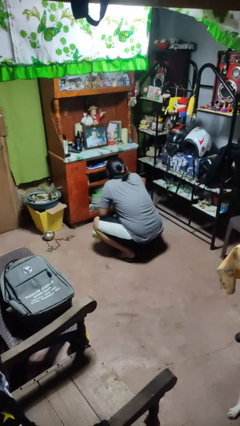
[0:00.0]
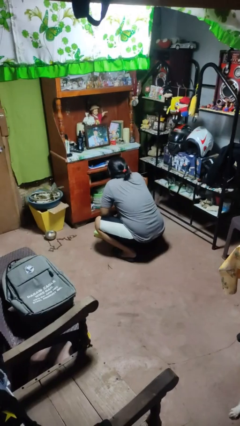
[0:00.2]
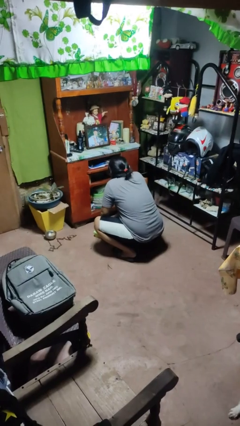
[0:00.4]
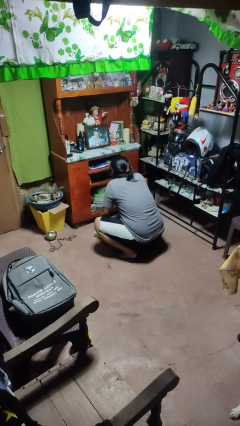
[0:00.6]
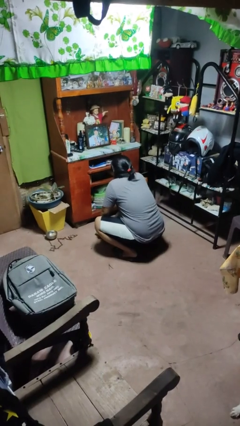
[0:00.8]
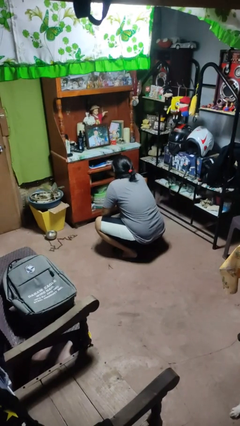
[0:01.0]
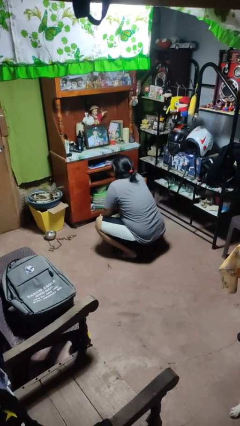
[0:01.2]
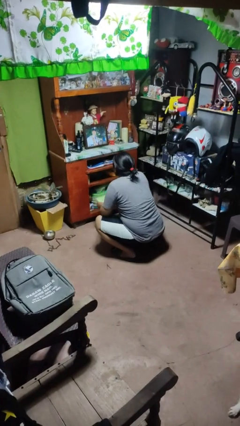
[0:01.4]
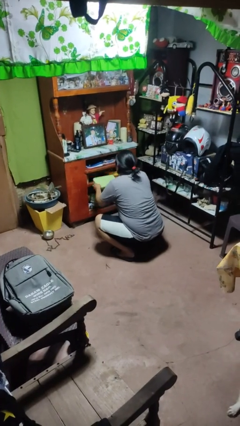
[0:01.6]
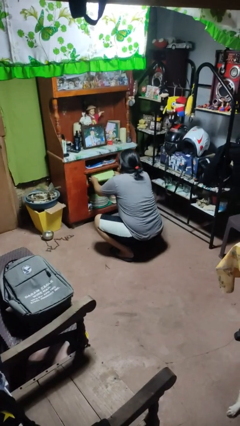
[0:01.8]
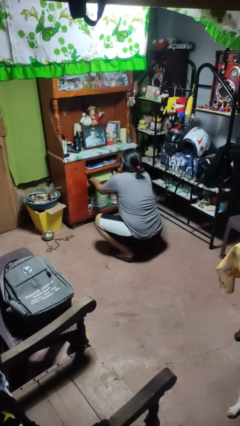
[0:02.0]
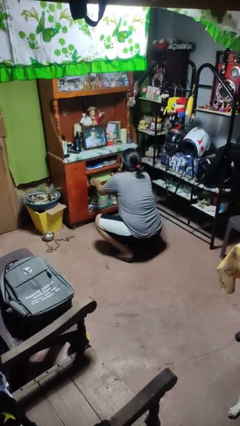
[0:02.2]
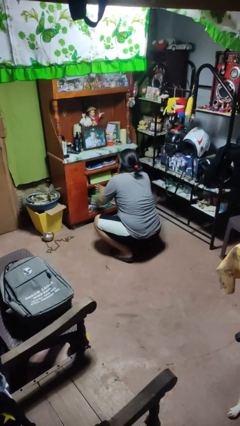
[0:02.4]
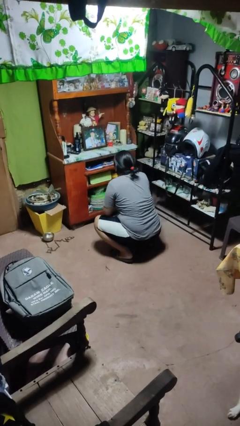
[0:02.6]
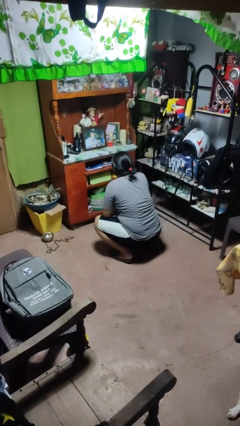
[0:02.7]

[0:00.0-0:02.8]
person puts object in cabinet

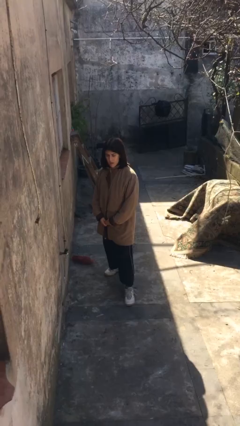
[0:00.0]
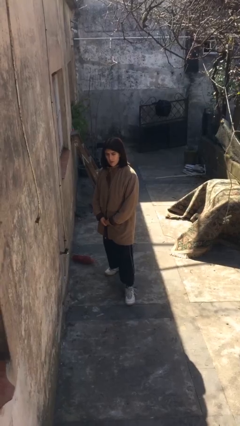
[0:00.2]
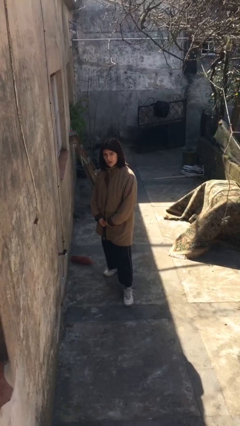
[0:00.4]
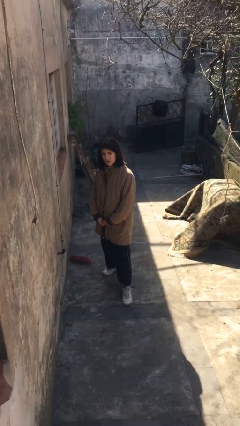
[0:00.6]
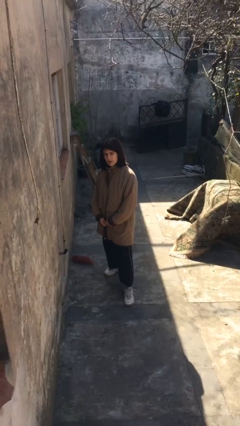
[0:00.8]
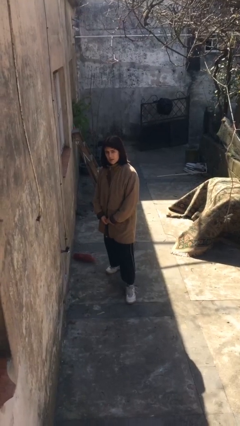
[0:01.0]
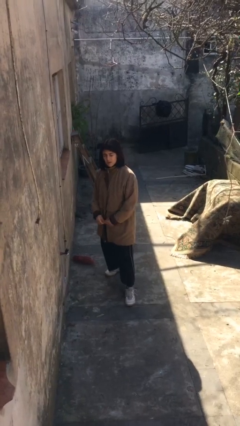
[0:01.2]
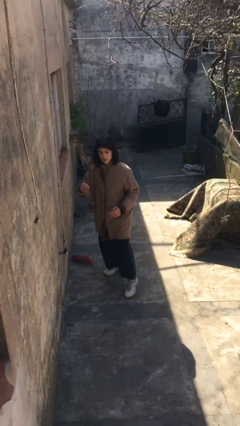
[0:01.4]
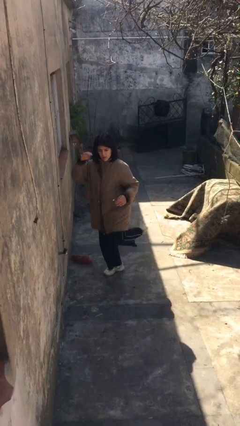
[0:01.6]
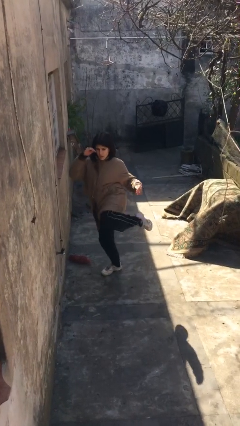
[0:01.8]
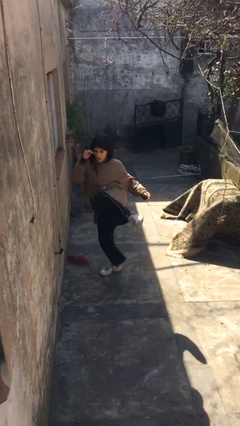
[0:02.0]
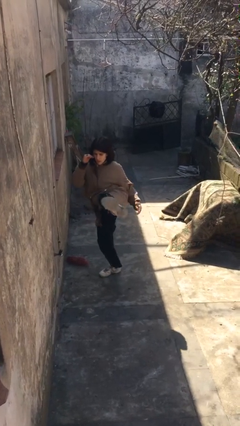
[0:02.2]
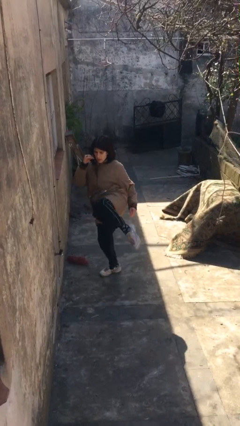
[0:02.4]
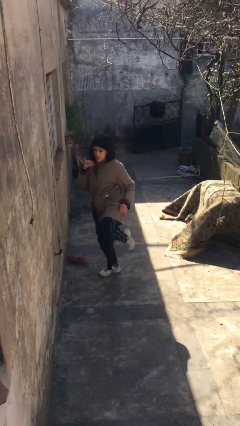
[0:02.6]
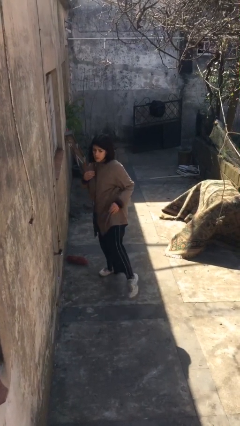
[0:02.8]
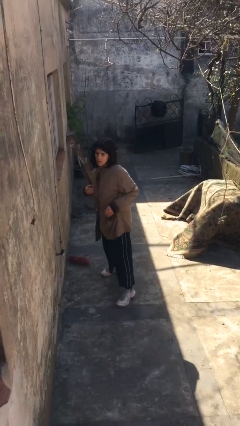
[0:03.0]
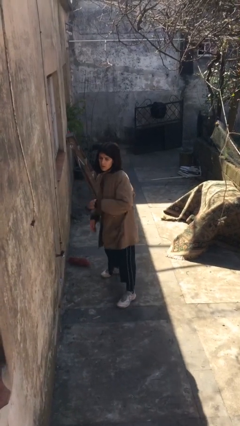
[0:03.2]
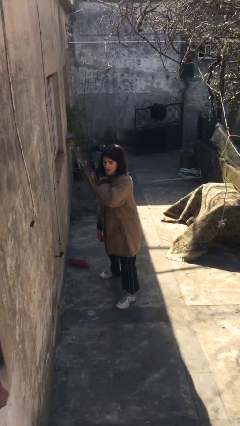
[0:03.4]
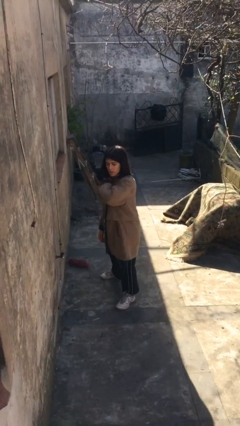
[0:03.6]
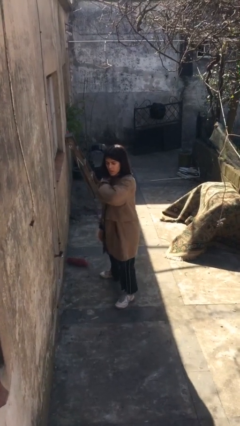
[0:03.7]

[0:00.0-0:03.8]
person karate kicks

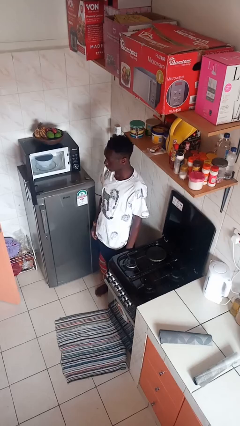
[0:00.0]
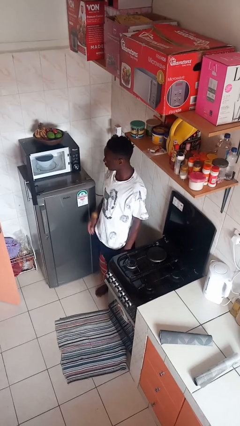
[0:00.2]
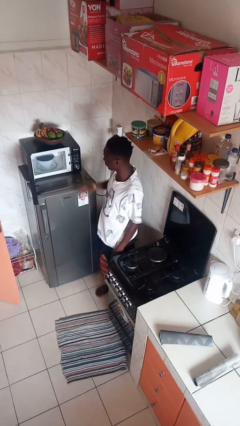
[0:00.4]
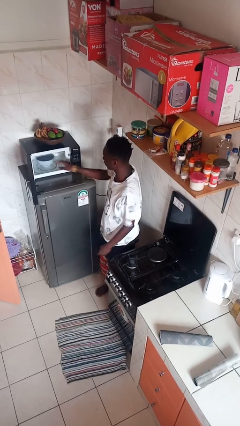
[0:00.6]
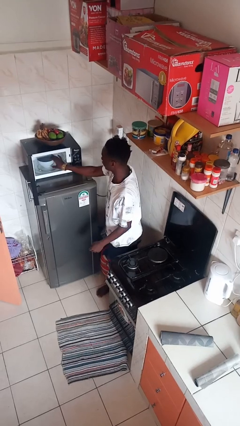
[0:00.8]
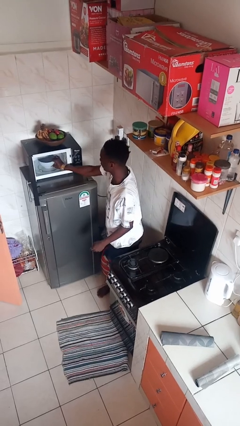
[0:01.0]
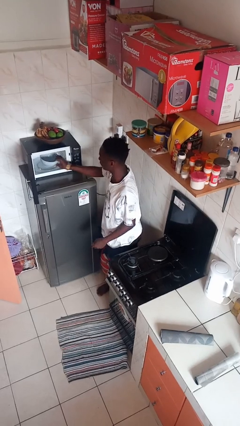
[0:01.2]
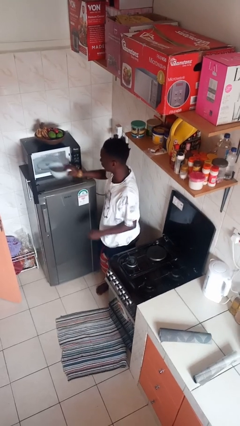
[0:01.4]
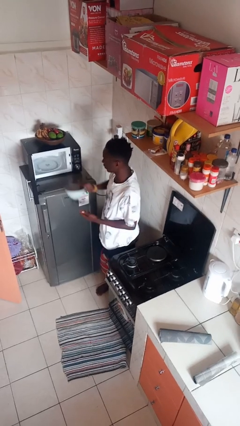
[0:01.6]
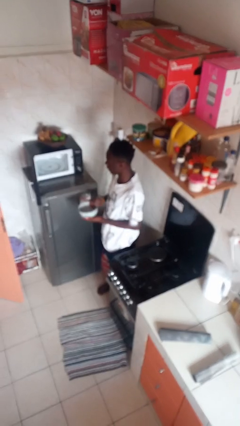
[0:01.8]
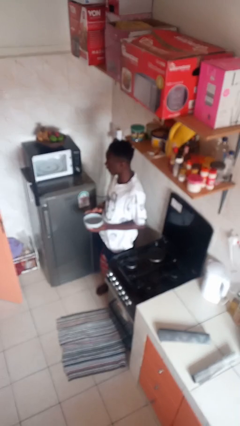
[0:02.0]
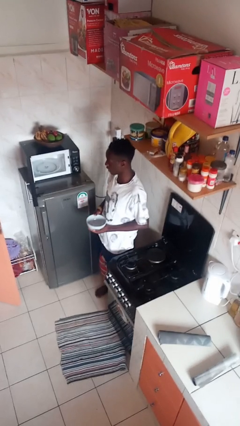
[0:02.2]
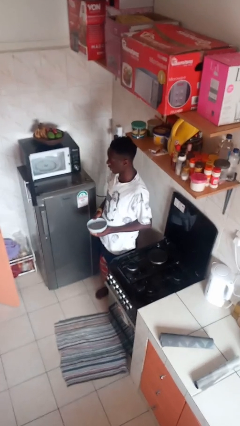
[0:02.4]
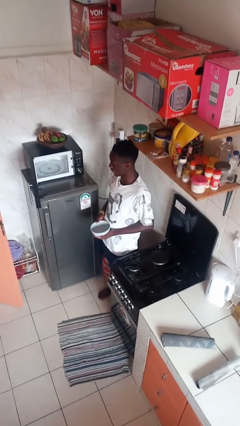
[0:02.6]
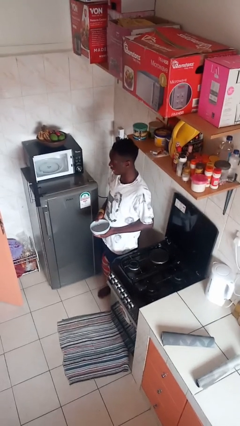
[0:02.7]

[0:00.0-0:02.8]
person takes object from microwave

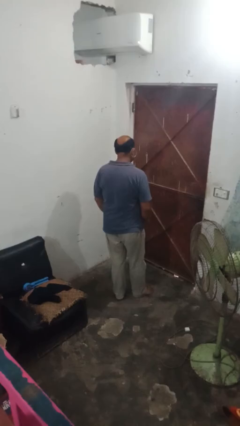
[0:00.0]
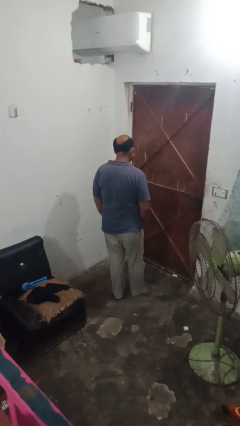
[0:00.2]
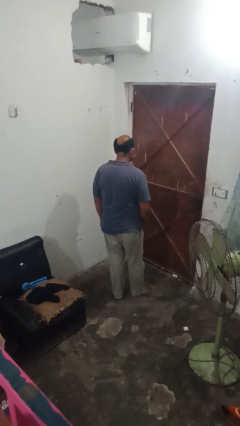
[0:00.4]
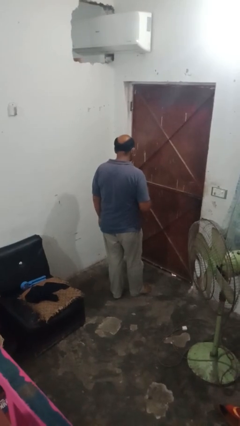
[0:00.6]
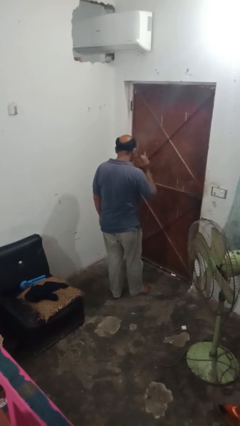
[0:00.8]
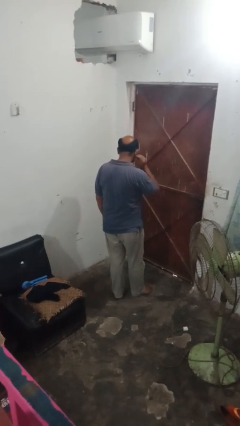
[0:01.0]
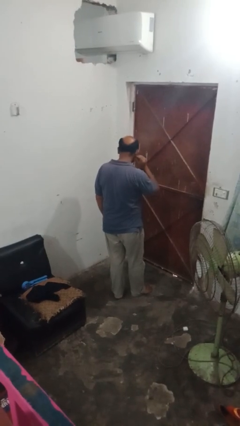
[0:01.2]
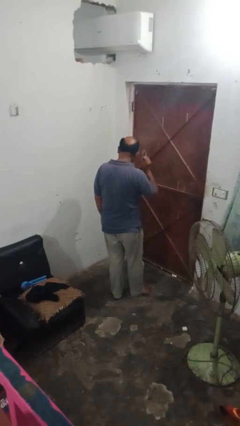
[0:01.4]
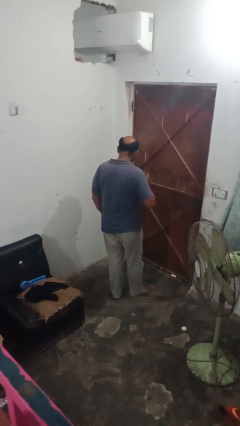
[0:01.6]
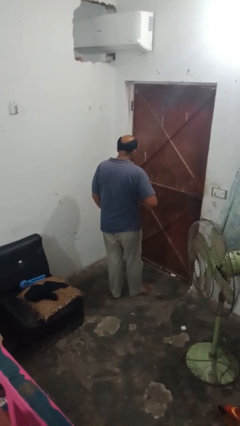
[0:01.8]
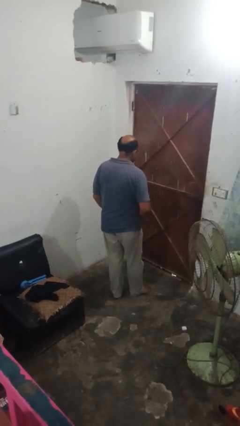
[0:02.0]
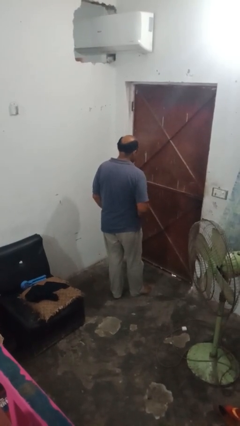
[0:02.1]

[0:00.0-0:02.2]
person takes off earrings

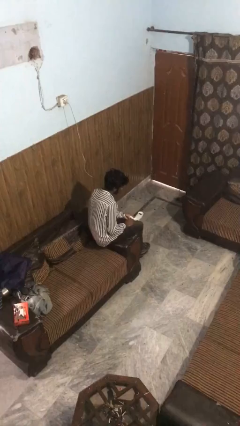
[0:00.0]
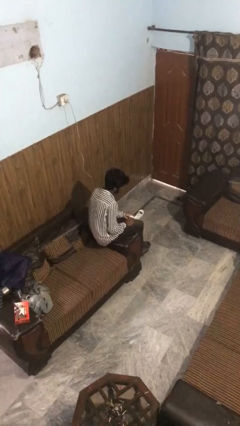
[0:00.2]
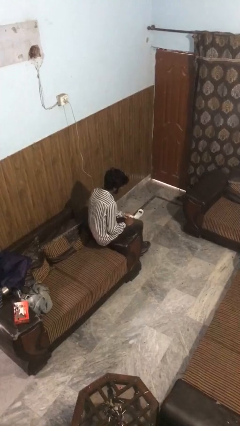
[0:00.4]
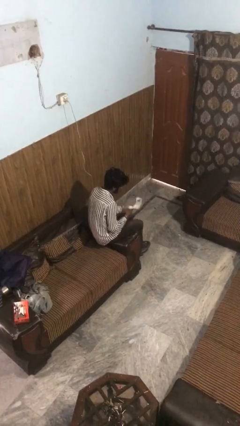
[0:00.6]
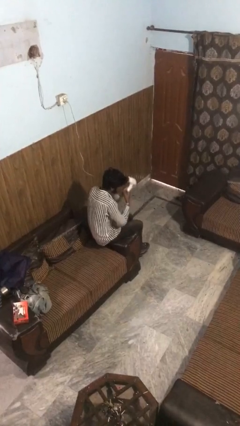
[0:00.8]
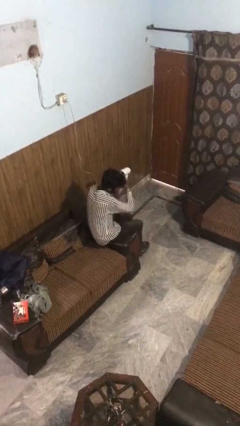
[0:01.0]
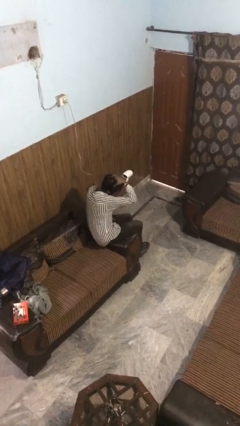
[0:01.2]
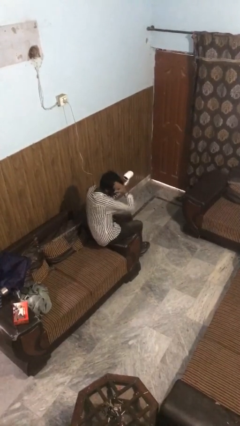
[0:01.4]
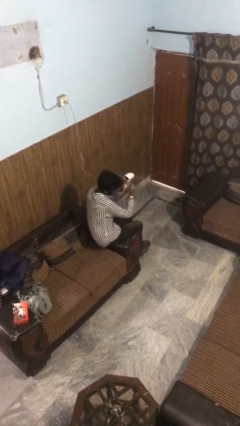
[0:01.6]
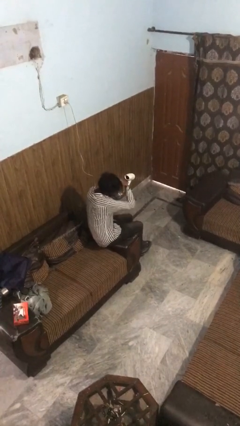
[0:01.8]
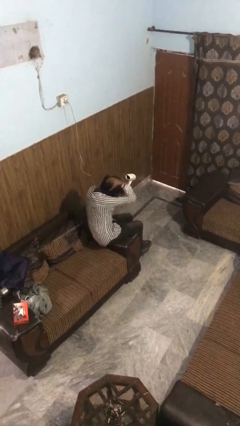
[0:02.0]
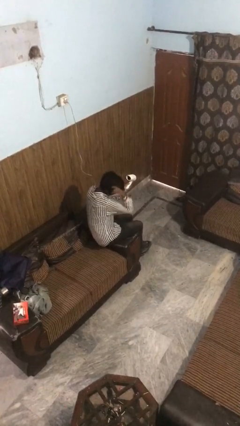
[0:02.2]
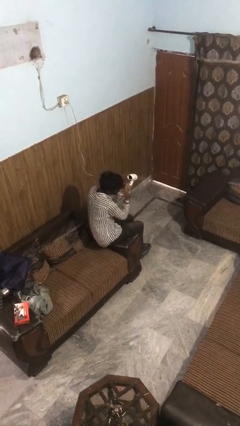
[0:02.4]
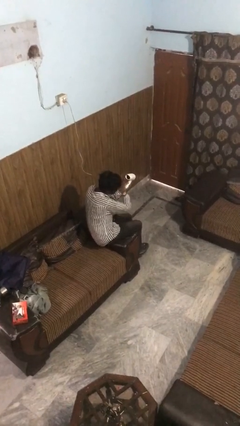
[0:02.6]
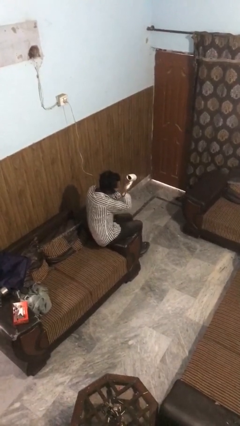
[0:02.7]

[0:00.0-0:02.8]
person dries hair with hairdryer

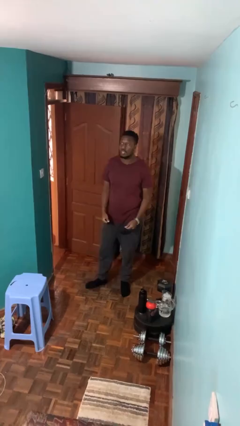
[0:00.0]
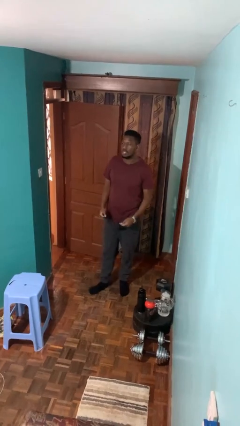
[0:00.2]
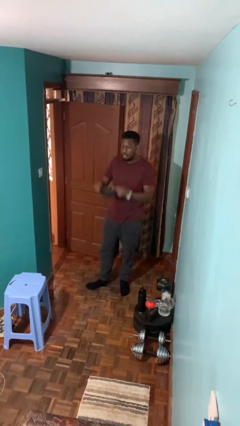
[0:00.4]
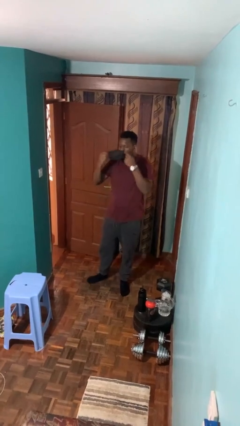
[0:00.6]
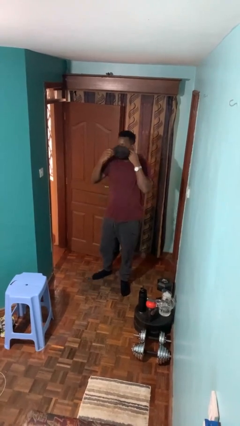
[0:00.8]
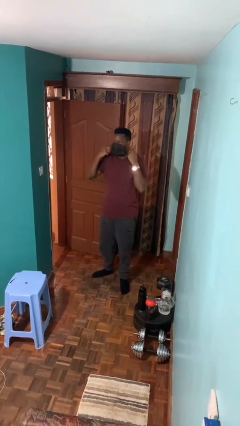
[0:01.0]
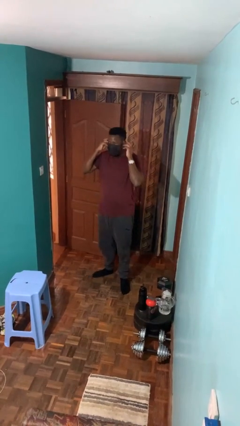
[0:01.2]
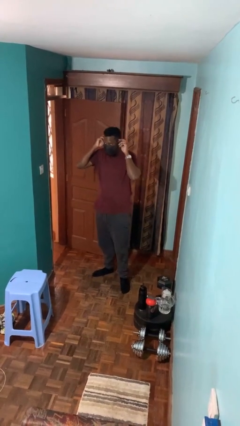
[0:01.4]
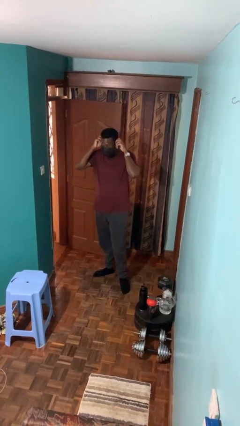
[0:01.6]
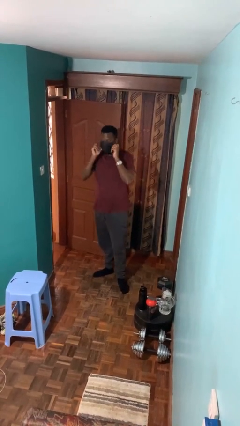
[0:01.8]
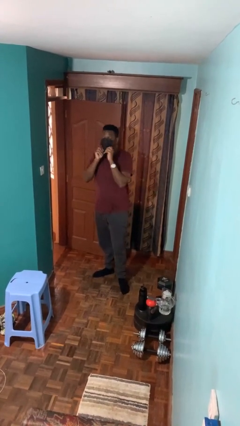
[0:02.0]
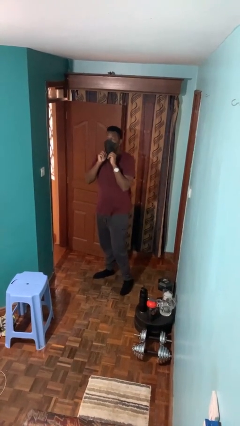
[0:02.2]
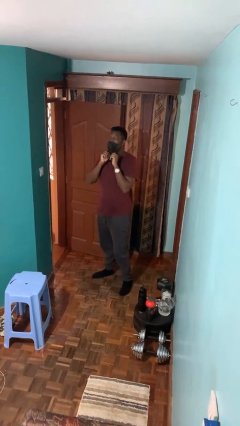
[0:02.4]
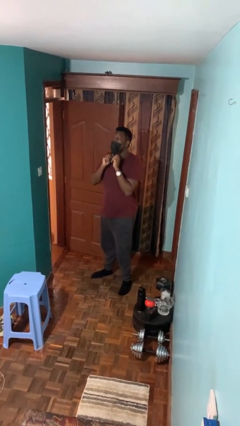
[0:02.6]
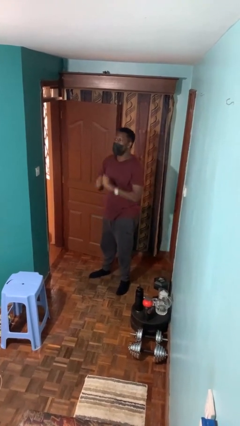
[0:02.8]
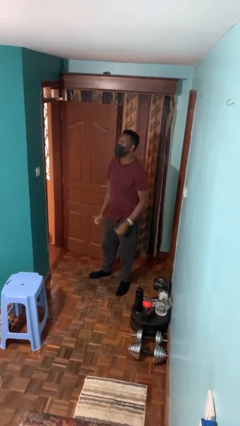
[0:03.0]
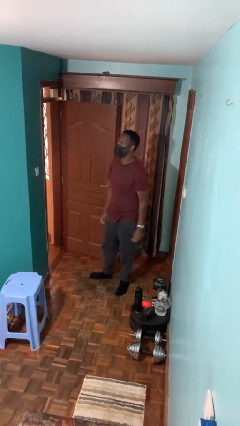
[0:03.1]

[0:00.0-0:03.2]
person puts on facemask

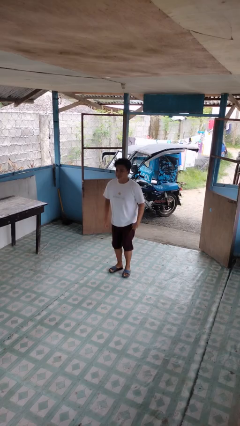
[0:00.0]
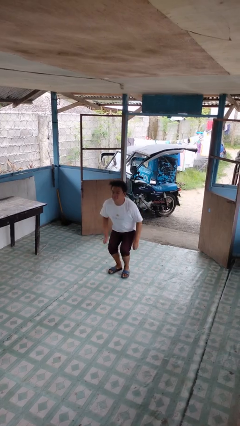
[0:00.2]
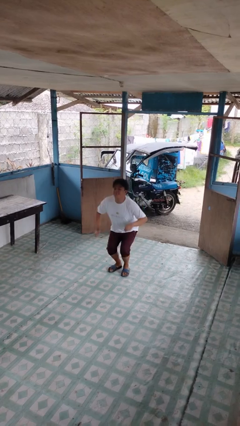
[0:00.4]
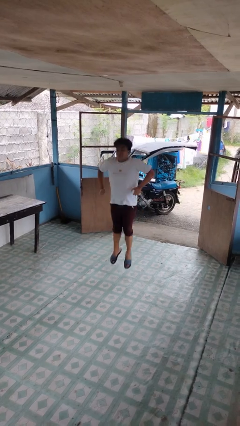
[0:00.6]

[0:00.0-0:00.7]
person jumps
